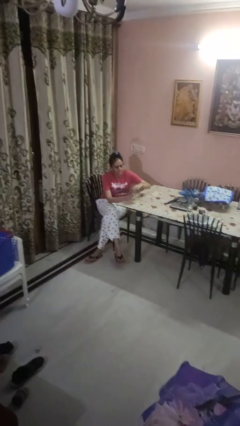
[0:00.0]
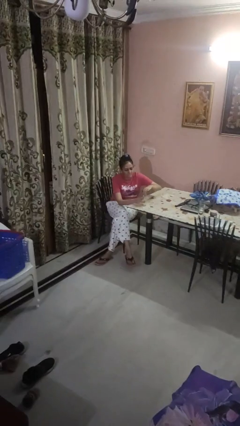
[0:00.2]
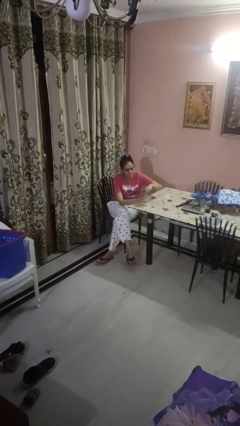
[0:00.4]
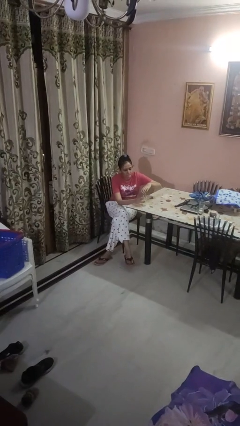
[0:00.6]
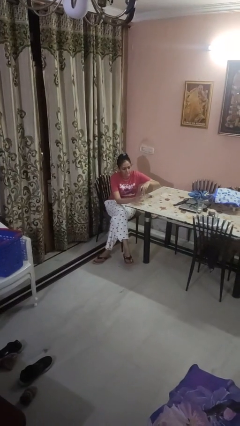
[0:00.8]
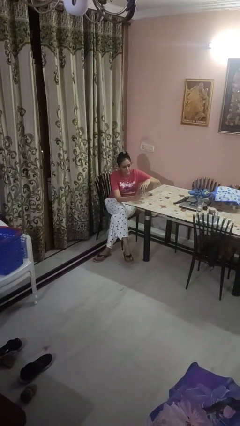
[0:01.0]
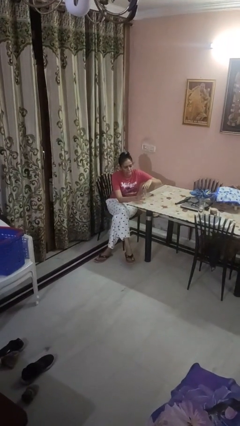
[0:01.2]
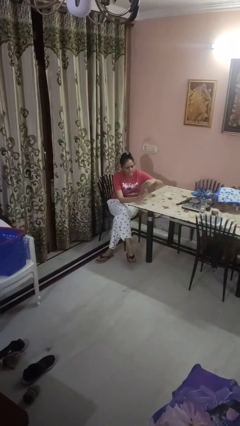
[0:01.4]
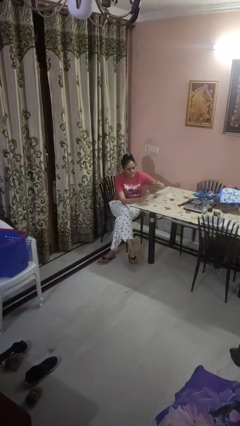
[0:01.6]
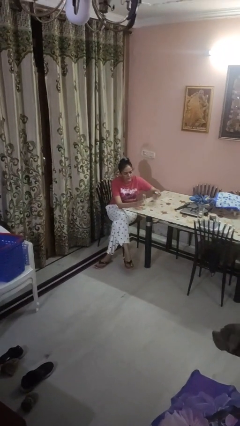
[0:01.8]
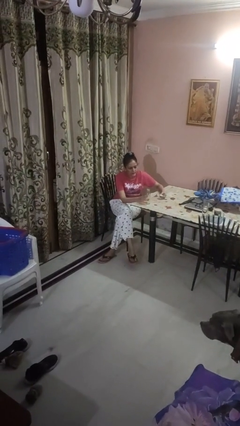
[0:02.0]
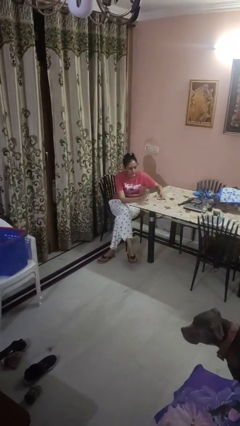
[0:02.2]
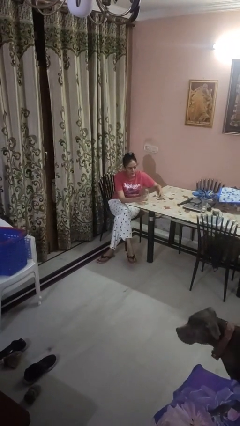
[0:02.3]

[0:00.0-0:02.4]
person unscrews lid from bottle

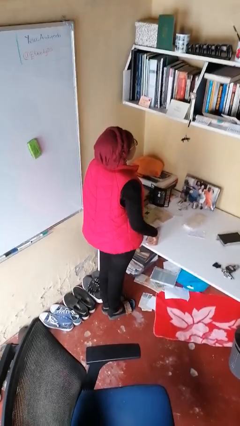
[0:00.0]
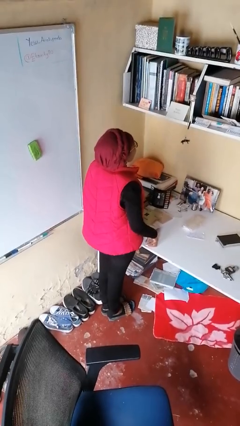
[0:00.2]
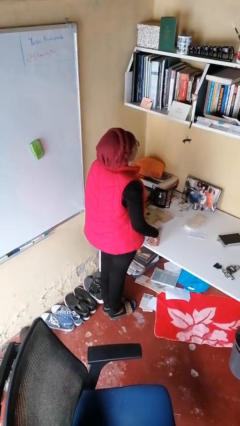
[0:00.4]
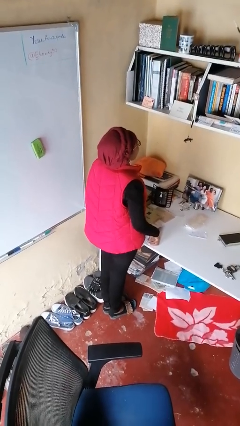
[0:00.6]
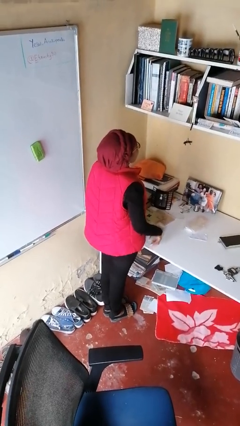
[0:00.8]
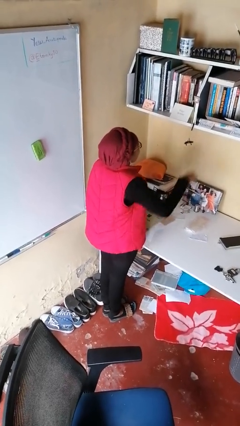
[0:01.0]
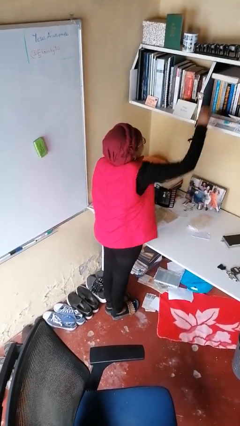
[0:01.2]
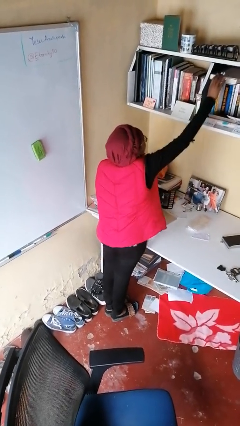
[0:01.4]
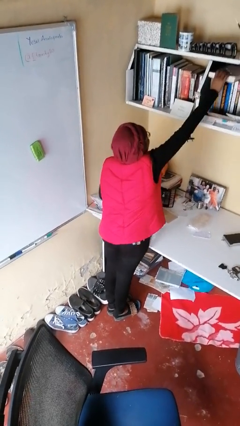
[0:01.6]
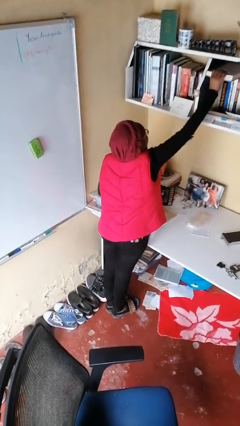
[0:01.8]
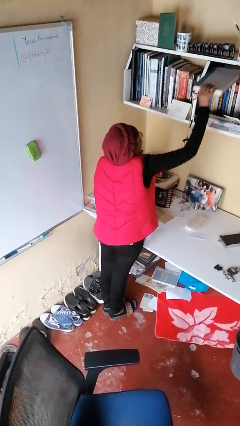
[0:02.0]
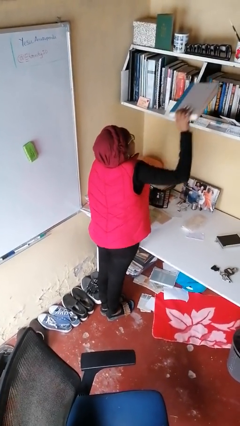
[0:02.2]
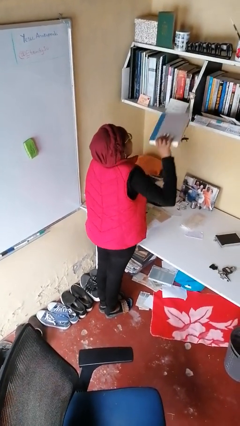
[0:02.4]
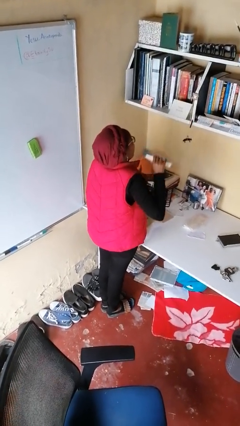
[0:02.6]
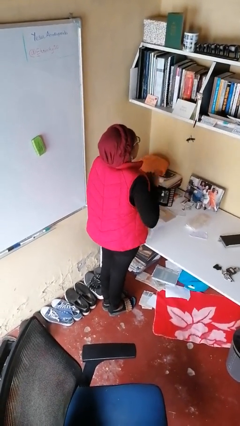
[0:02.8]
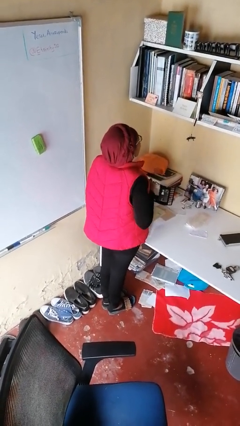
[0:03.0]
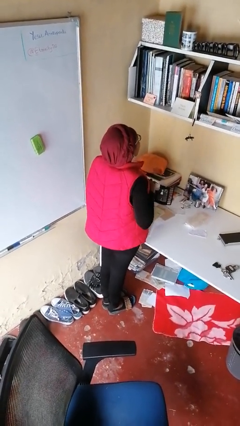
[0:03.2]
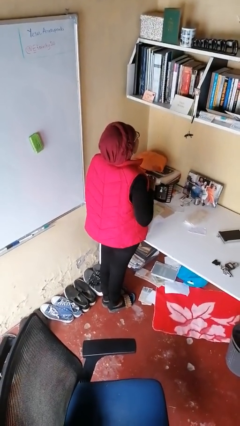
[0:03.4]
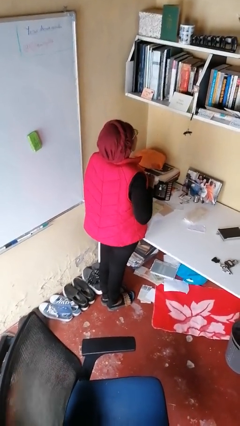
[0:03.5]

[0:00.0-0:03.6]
person picks up object from shelf

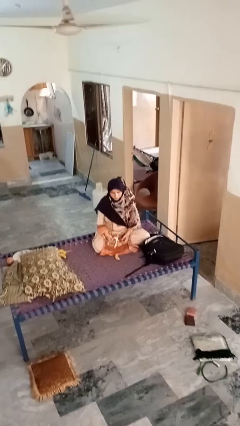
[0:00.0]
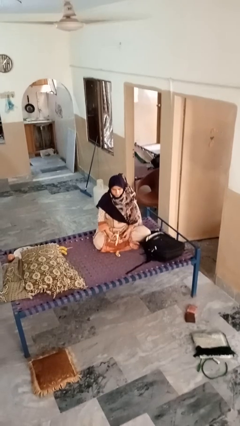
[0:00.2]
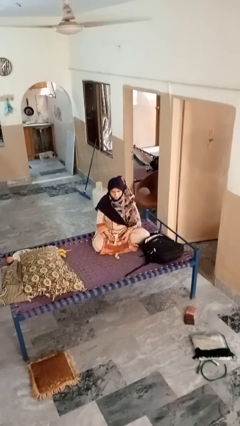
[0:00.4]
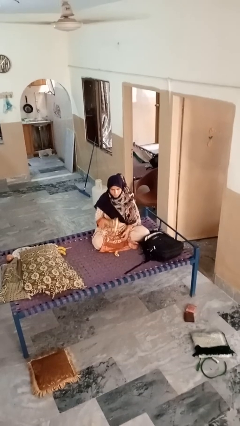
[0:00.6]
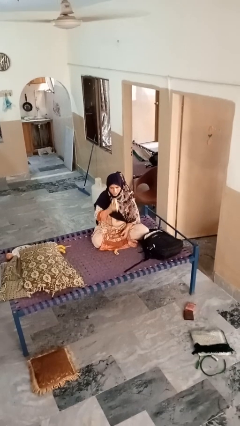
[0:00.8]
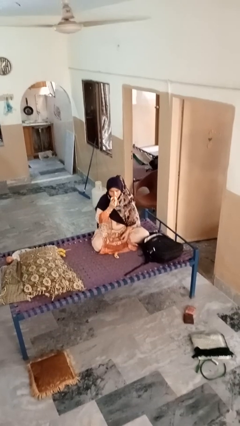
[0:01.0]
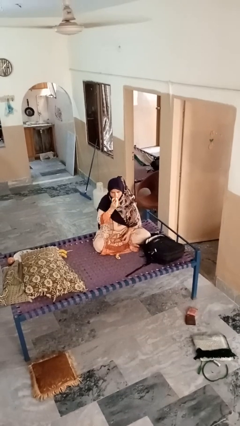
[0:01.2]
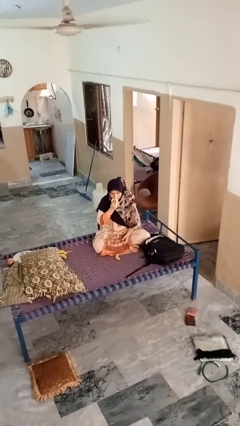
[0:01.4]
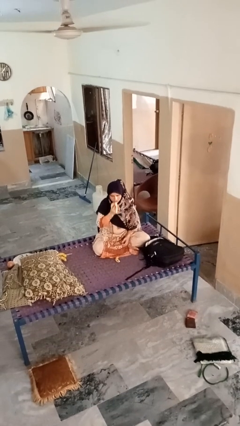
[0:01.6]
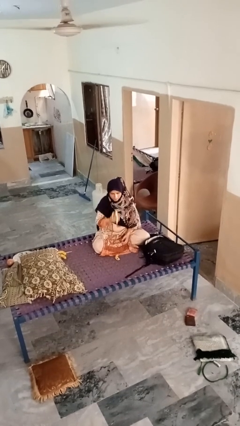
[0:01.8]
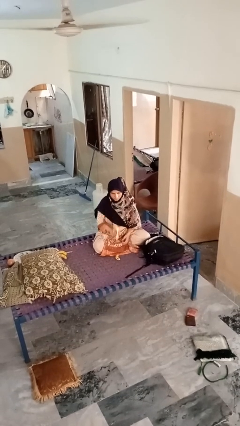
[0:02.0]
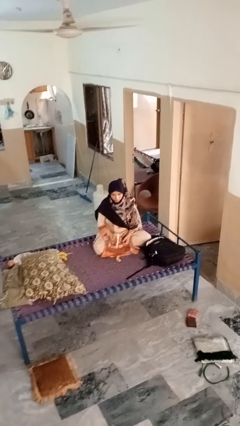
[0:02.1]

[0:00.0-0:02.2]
person eats banana

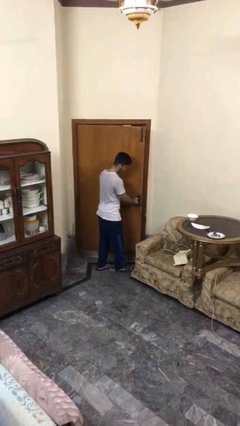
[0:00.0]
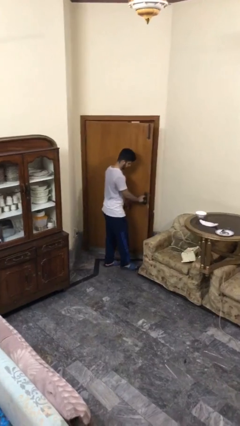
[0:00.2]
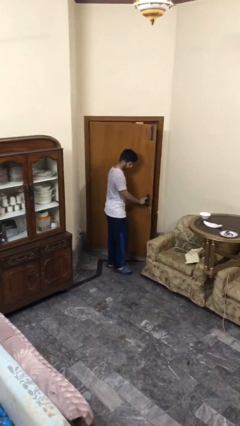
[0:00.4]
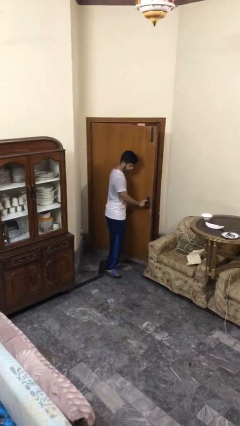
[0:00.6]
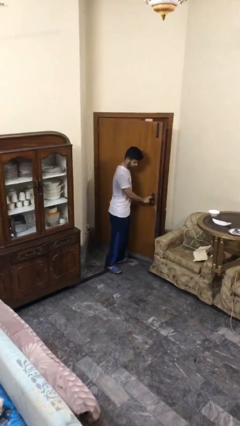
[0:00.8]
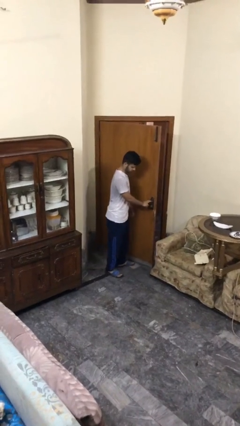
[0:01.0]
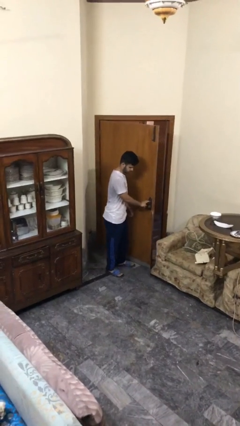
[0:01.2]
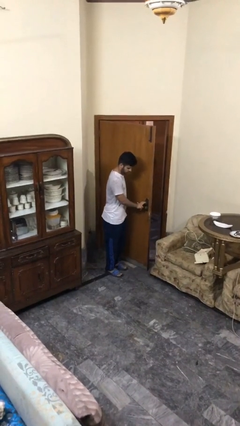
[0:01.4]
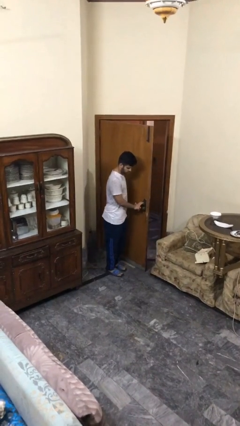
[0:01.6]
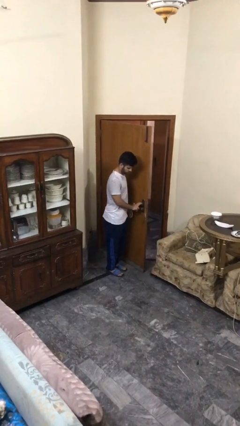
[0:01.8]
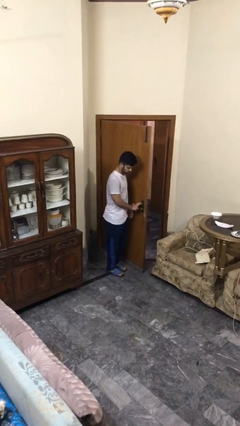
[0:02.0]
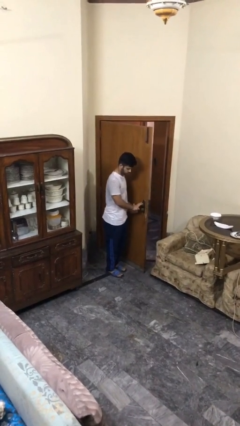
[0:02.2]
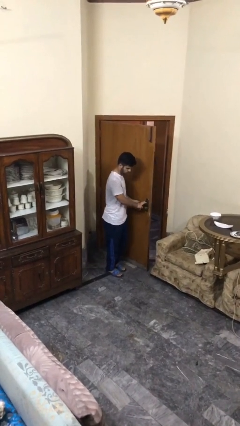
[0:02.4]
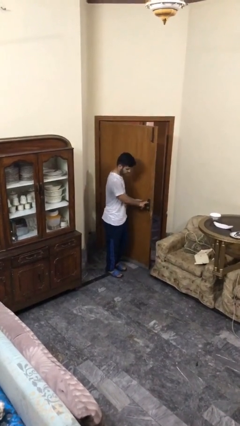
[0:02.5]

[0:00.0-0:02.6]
person opens facility door

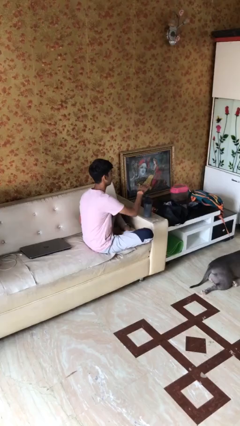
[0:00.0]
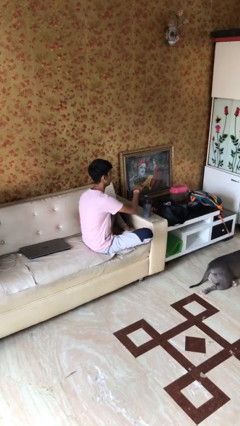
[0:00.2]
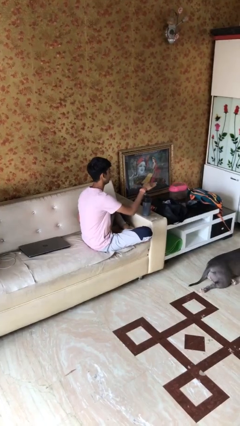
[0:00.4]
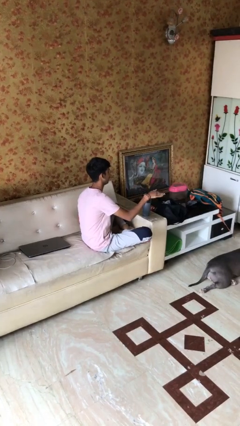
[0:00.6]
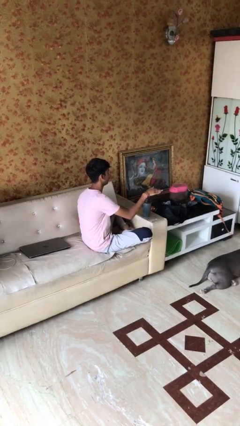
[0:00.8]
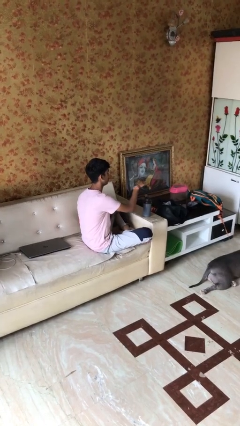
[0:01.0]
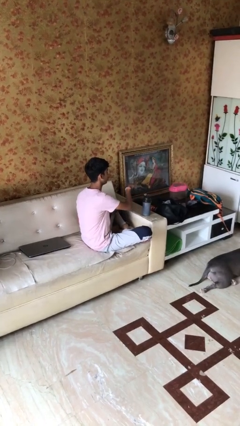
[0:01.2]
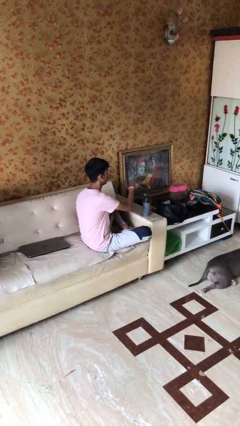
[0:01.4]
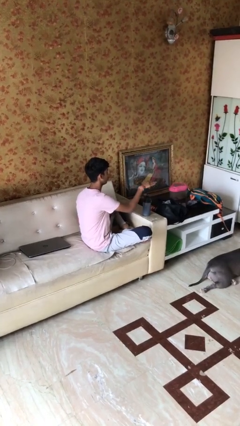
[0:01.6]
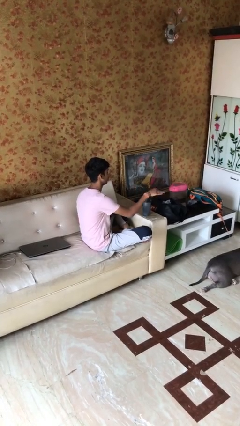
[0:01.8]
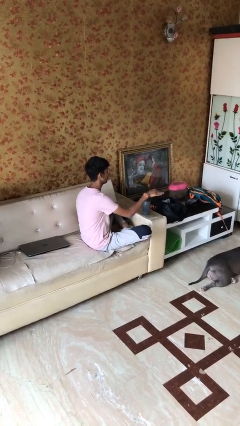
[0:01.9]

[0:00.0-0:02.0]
person waves hand over object

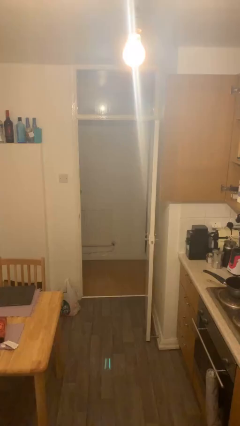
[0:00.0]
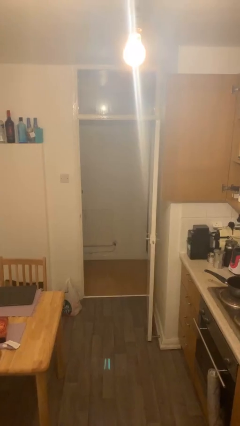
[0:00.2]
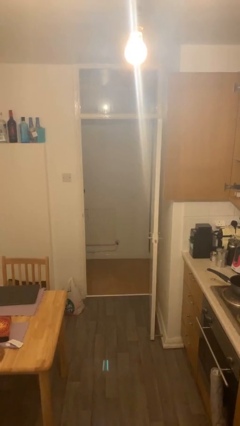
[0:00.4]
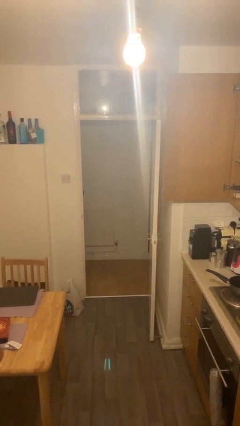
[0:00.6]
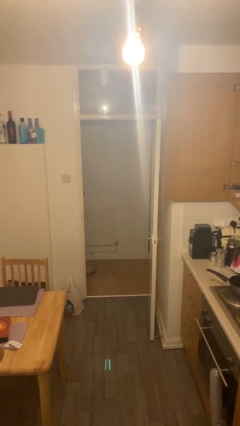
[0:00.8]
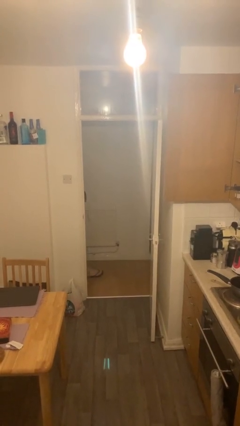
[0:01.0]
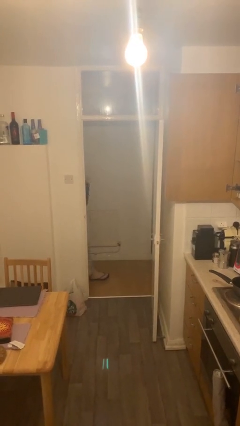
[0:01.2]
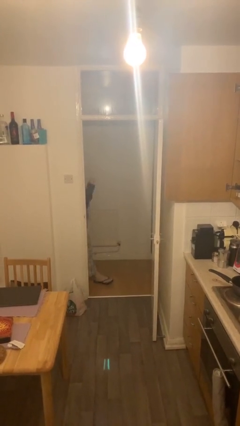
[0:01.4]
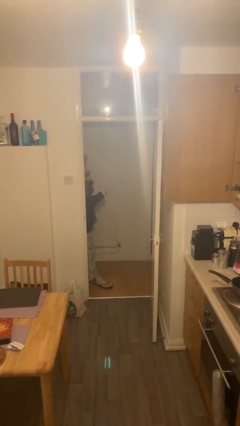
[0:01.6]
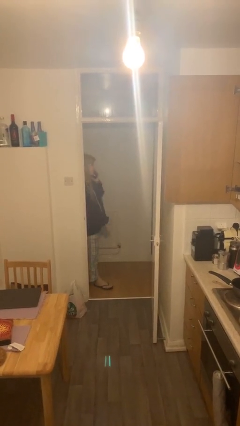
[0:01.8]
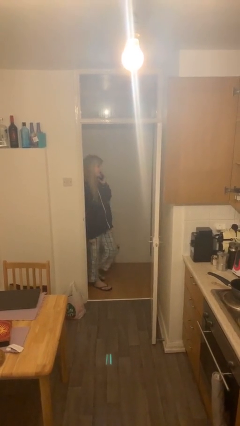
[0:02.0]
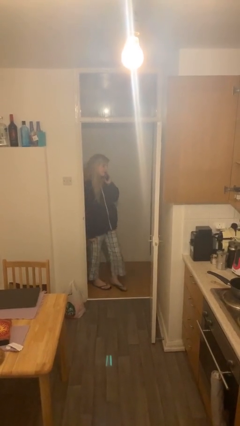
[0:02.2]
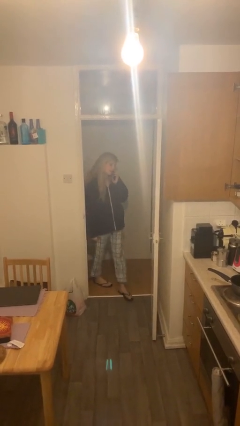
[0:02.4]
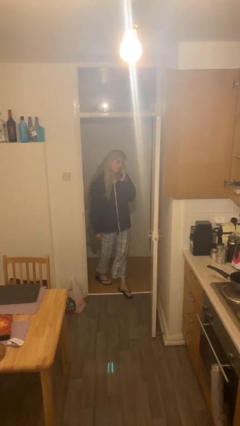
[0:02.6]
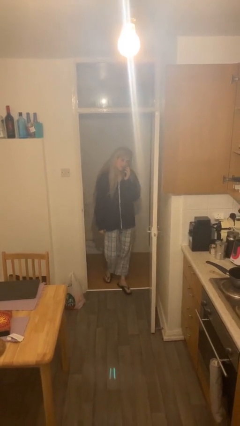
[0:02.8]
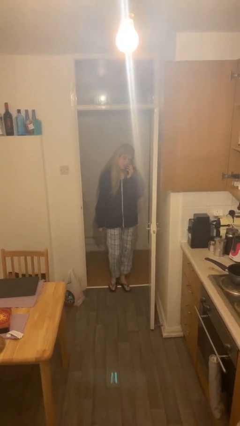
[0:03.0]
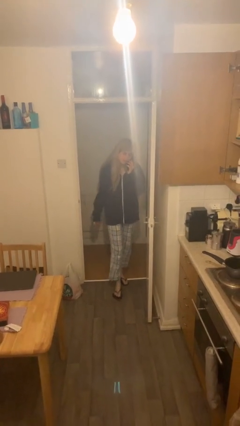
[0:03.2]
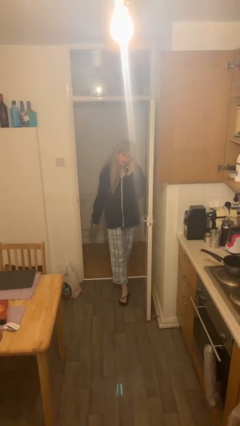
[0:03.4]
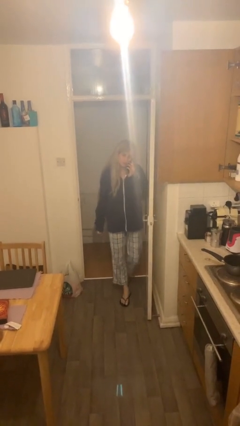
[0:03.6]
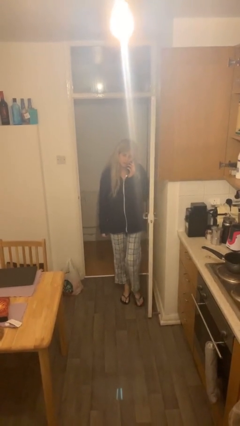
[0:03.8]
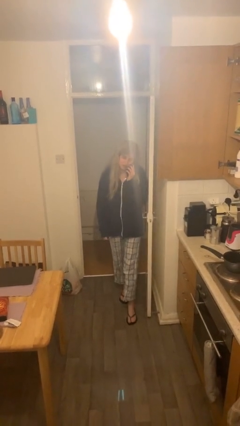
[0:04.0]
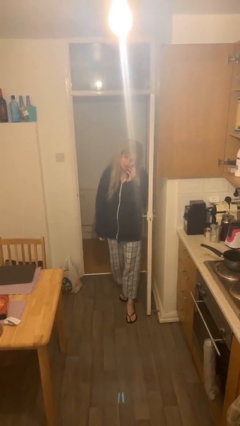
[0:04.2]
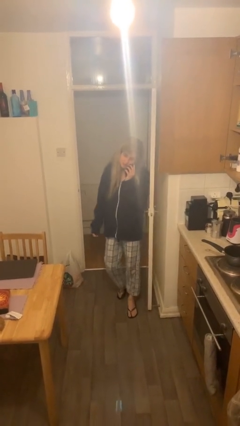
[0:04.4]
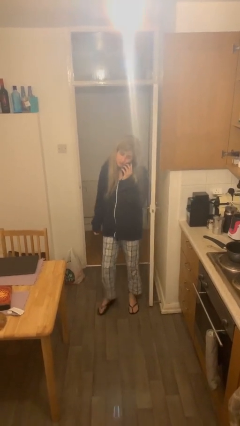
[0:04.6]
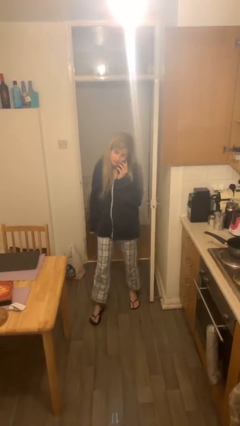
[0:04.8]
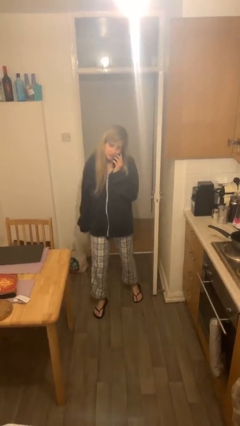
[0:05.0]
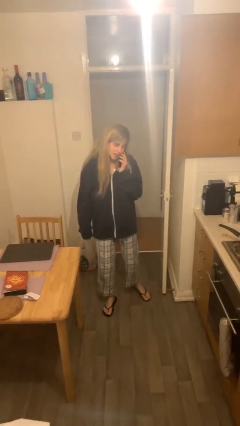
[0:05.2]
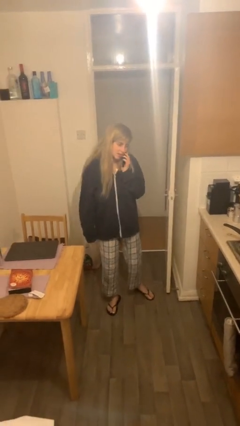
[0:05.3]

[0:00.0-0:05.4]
person enters scene through structure
